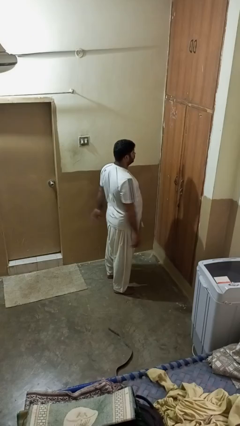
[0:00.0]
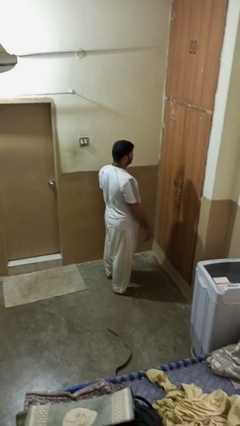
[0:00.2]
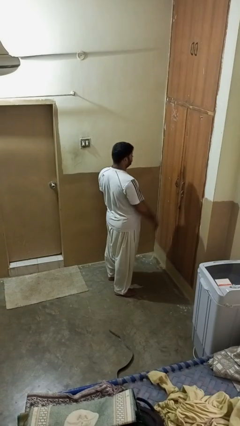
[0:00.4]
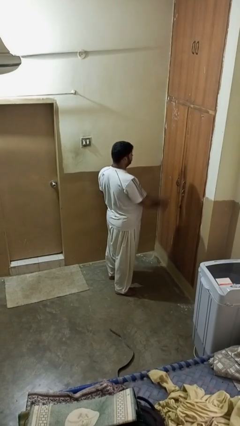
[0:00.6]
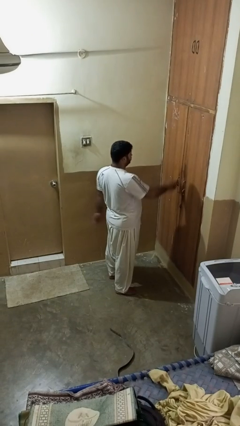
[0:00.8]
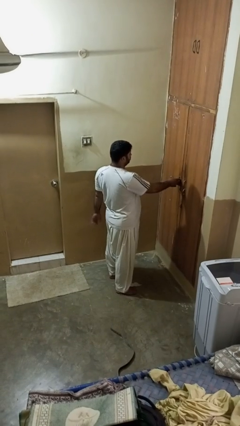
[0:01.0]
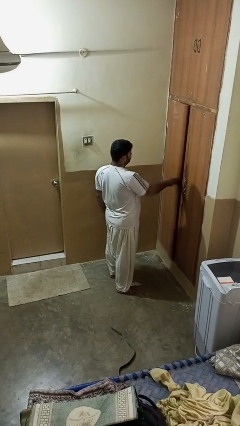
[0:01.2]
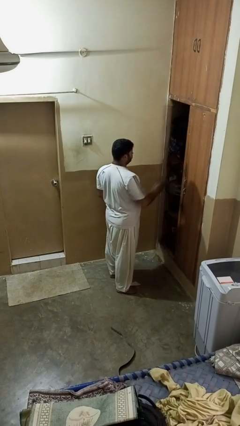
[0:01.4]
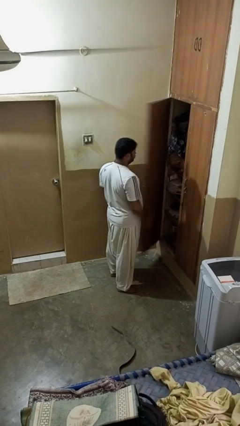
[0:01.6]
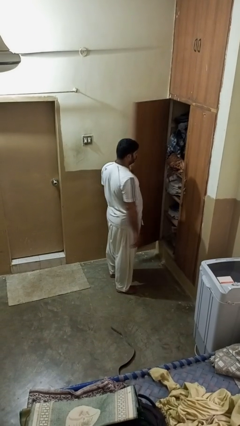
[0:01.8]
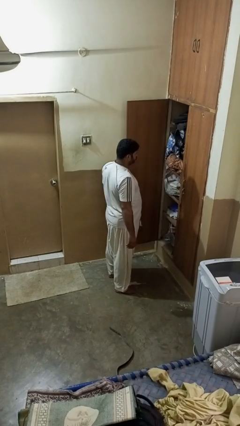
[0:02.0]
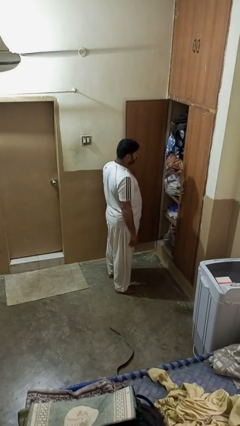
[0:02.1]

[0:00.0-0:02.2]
person opens closet door

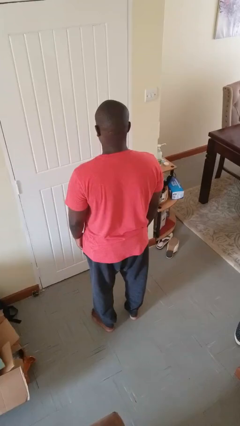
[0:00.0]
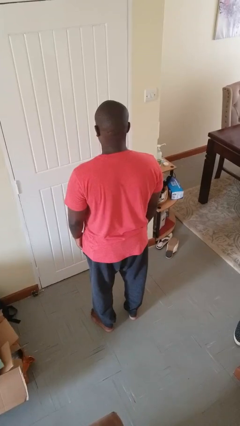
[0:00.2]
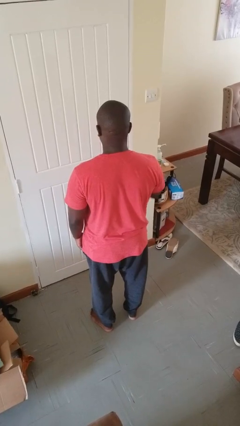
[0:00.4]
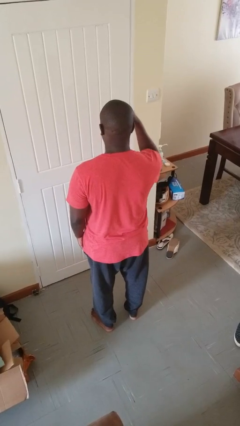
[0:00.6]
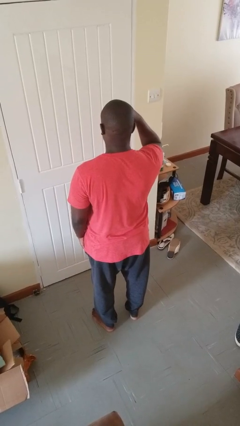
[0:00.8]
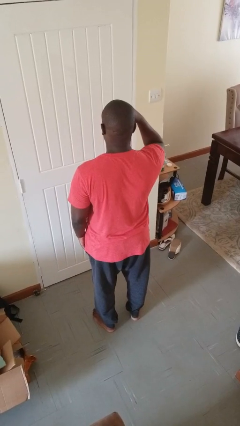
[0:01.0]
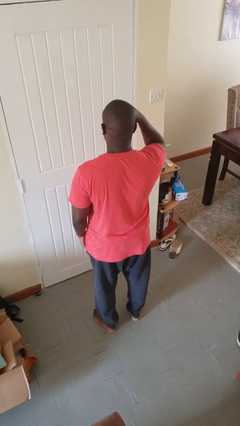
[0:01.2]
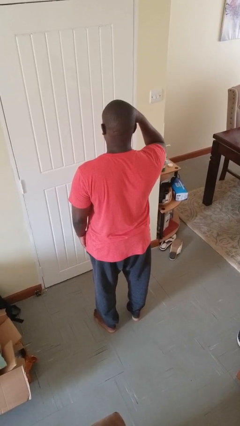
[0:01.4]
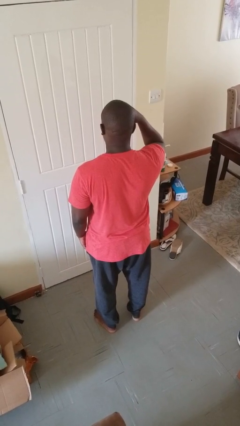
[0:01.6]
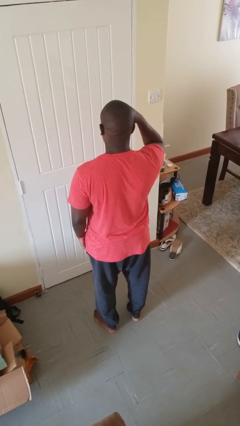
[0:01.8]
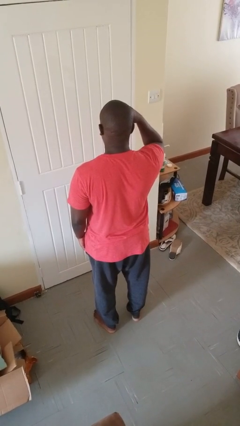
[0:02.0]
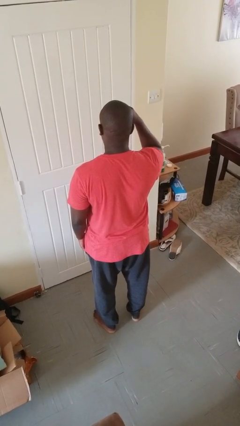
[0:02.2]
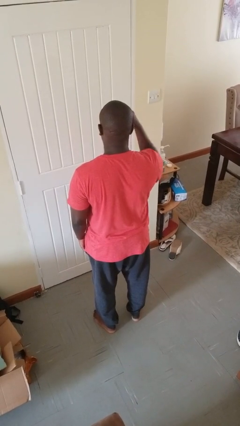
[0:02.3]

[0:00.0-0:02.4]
person salutes

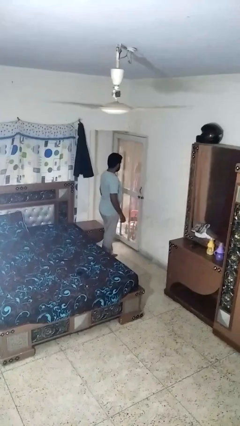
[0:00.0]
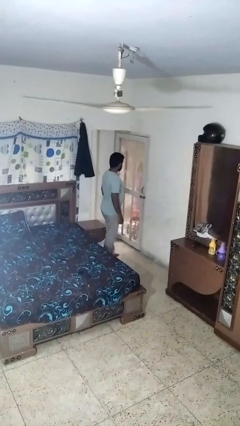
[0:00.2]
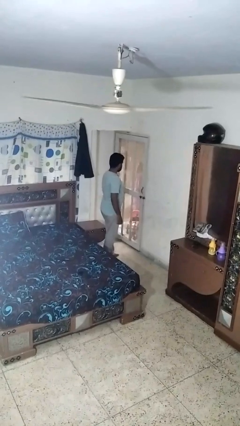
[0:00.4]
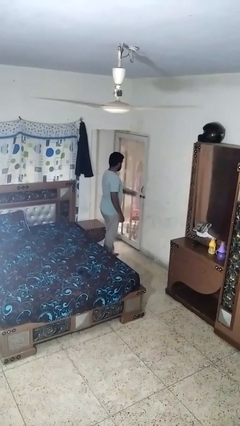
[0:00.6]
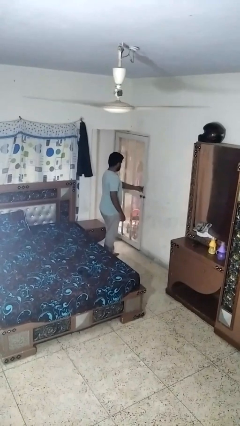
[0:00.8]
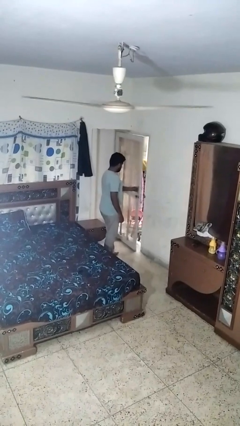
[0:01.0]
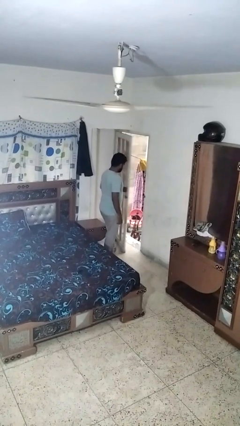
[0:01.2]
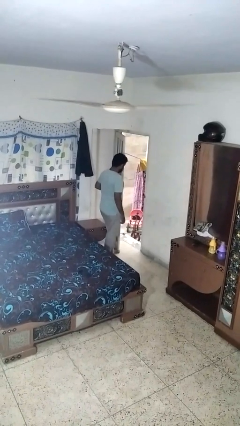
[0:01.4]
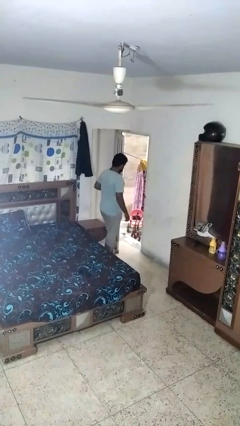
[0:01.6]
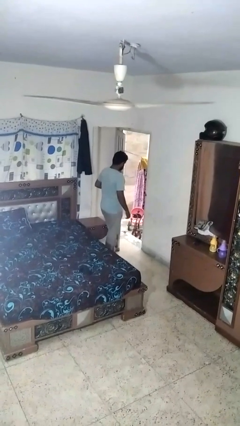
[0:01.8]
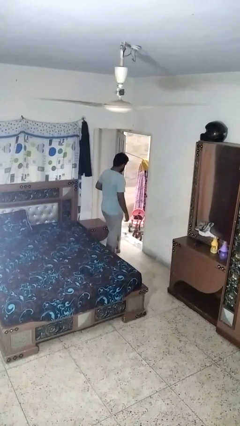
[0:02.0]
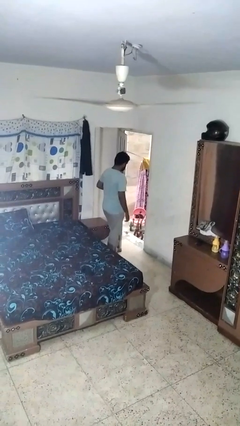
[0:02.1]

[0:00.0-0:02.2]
person opens facility door

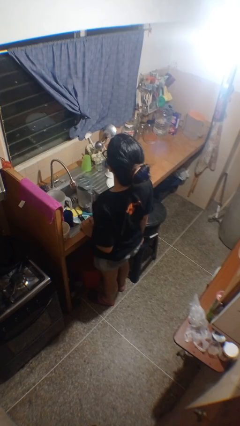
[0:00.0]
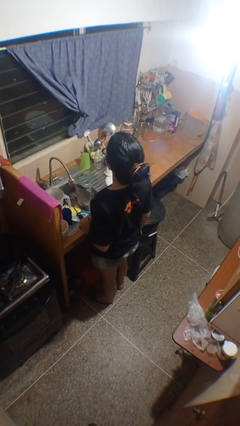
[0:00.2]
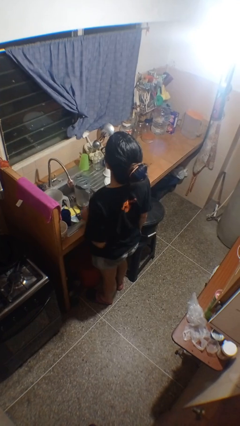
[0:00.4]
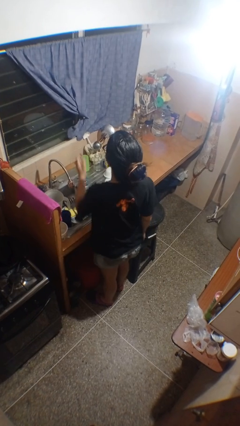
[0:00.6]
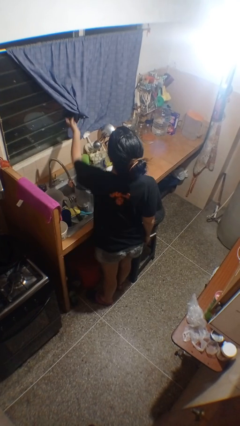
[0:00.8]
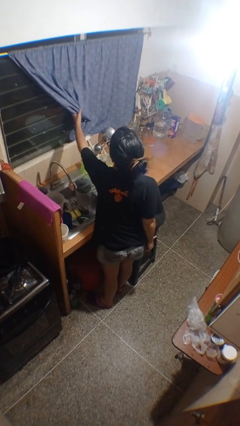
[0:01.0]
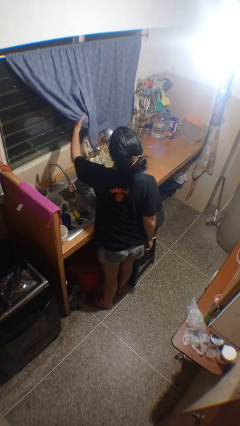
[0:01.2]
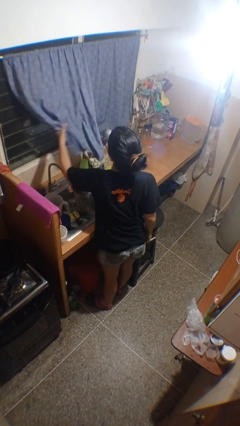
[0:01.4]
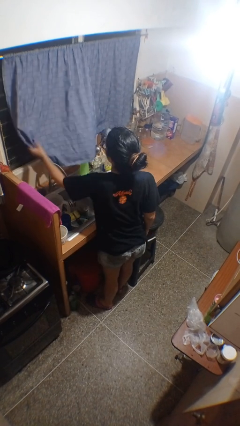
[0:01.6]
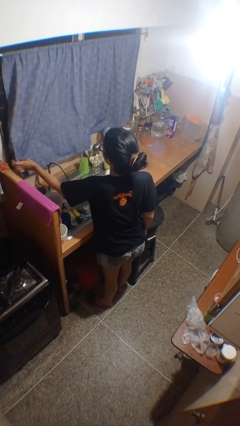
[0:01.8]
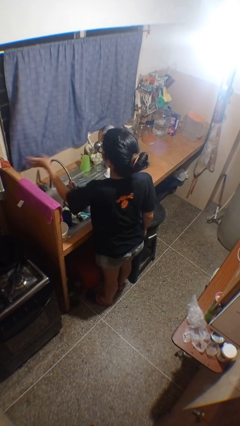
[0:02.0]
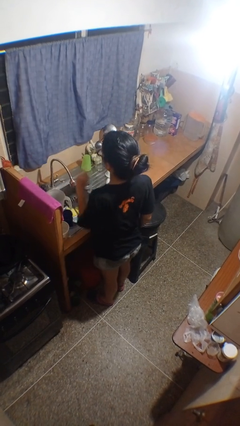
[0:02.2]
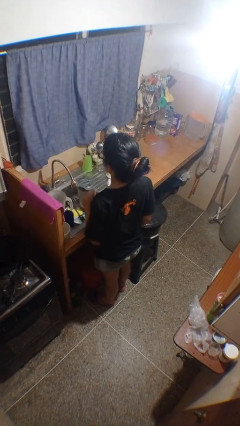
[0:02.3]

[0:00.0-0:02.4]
person closes curtains

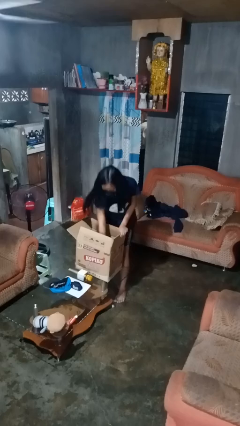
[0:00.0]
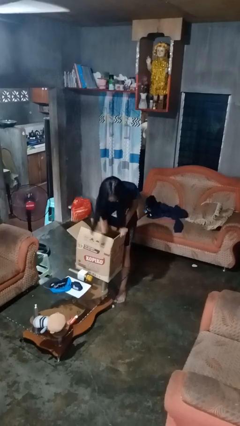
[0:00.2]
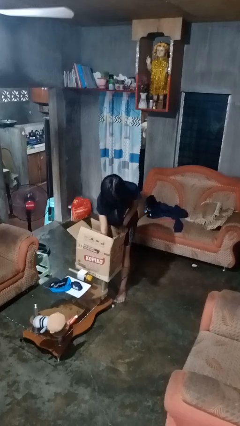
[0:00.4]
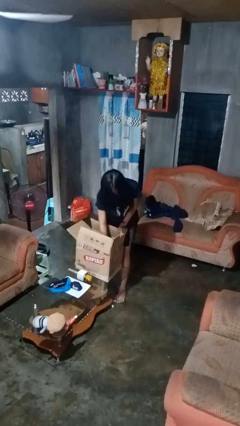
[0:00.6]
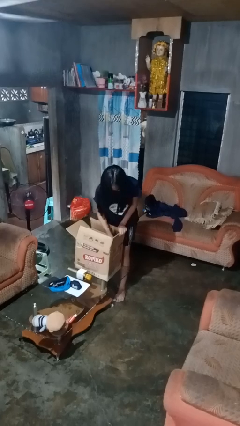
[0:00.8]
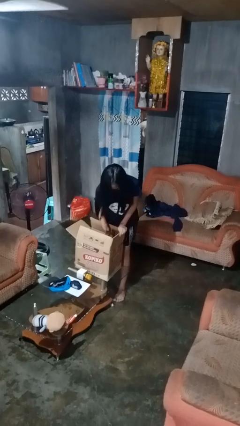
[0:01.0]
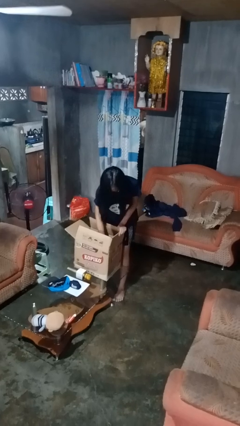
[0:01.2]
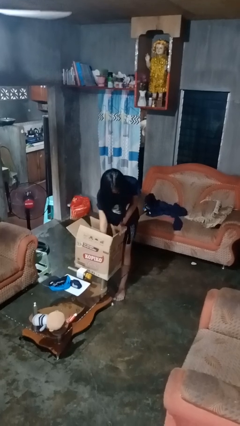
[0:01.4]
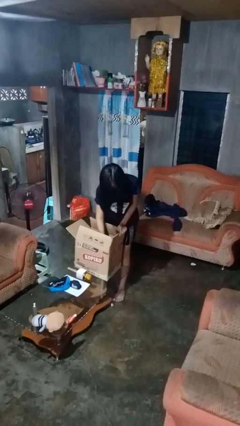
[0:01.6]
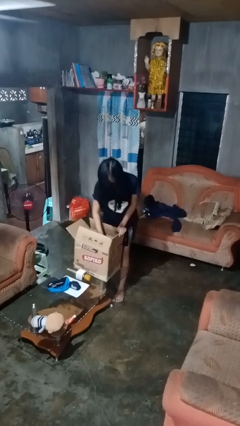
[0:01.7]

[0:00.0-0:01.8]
person searches in box

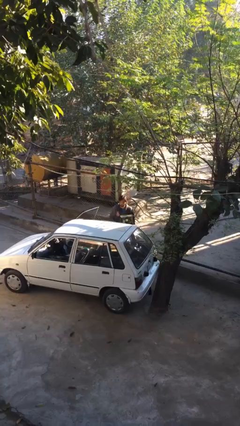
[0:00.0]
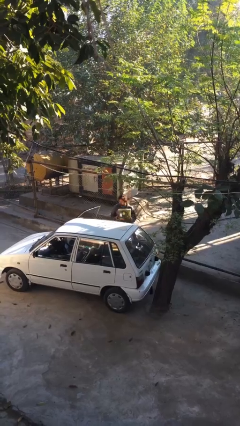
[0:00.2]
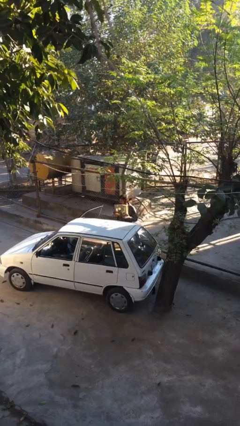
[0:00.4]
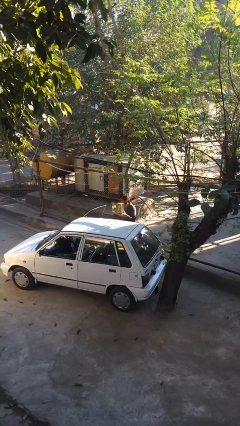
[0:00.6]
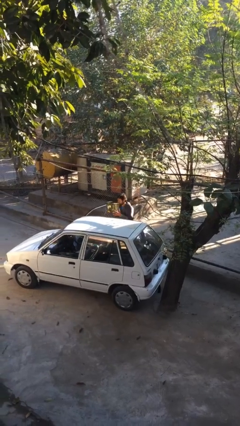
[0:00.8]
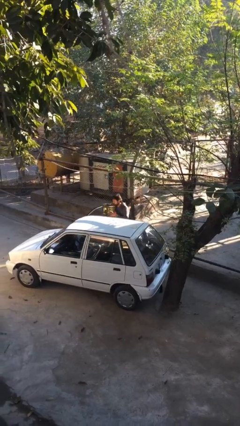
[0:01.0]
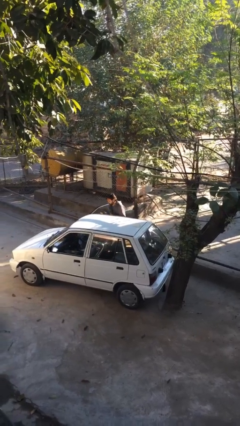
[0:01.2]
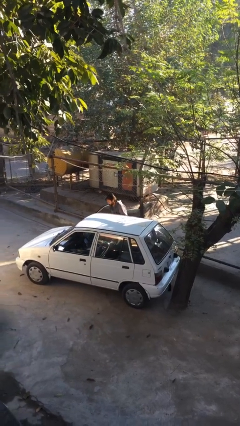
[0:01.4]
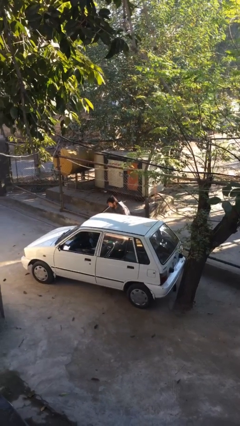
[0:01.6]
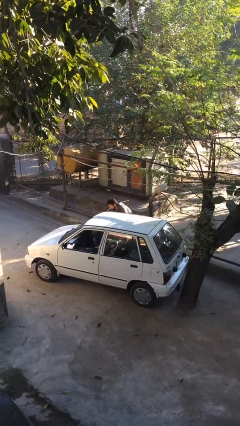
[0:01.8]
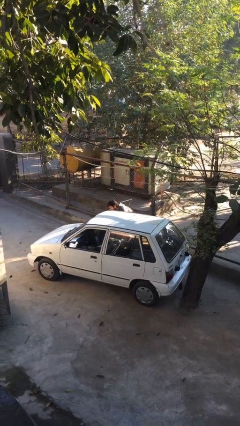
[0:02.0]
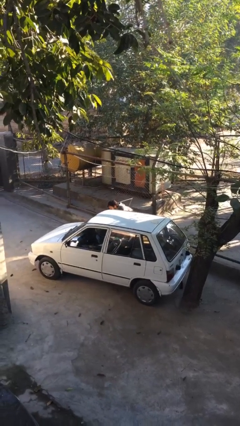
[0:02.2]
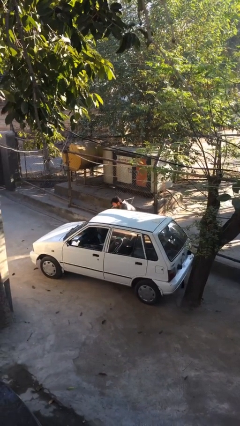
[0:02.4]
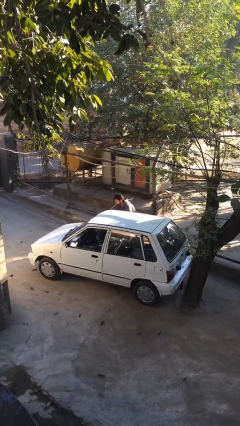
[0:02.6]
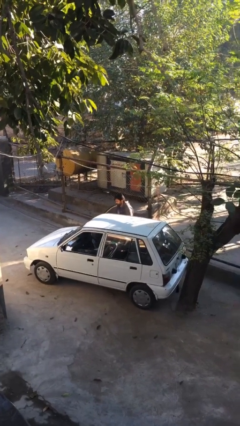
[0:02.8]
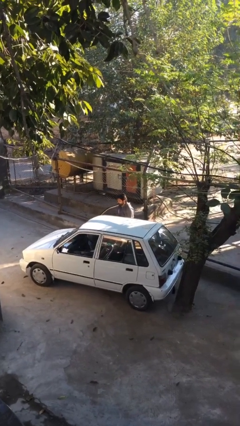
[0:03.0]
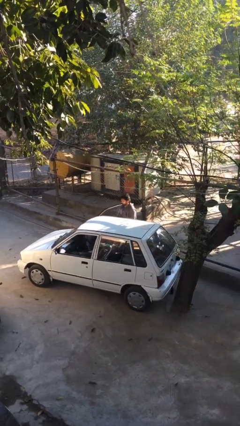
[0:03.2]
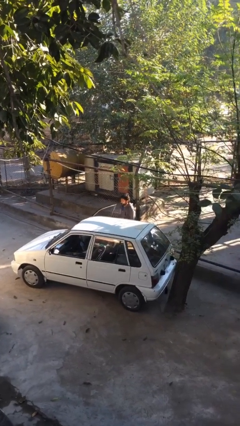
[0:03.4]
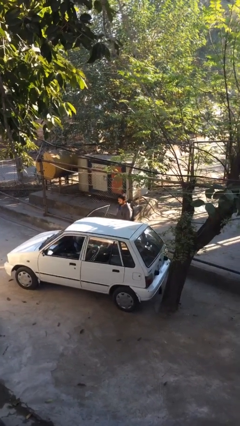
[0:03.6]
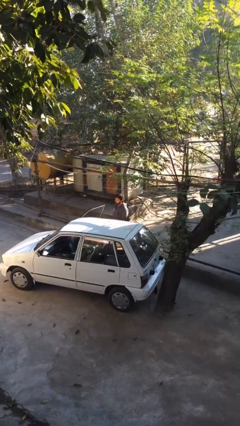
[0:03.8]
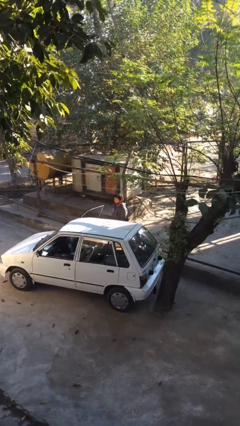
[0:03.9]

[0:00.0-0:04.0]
person loads car

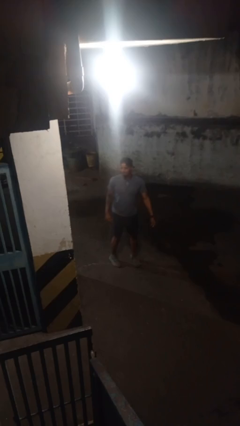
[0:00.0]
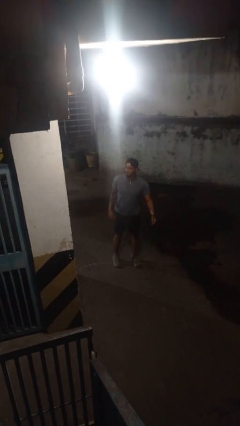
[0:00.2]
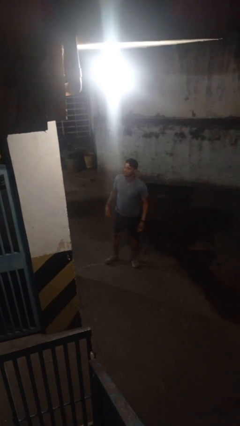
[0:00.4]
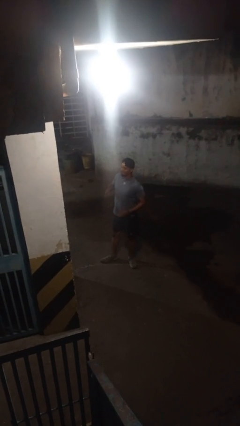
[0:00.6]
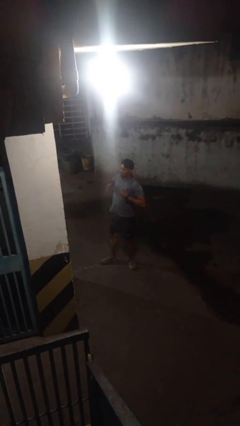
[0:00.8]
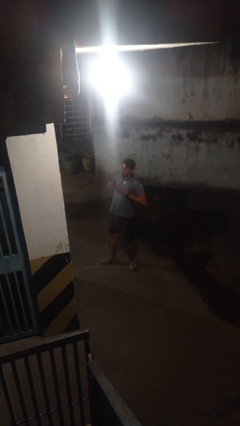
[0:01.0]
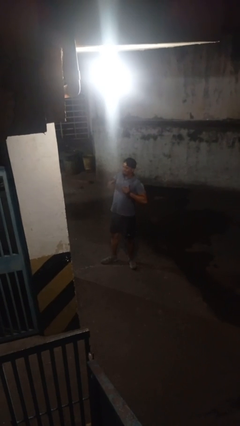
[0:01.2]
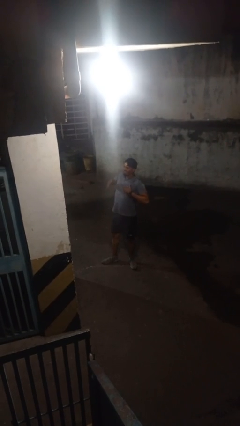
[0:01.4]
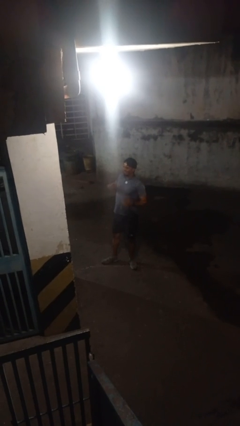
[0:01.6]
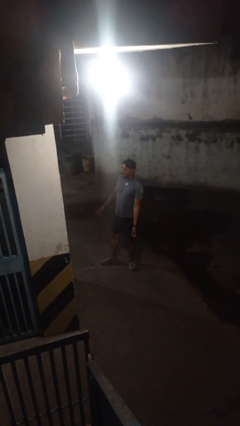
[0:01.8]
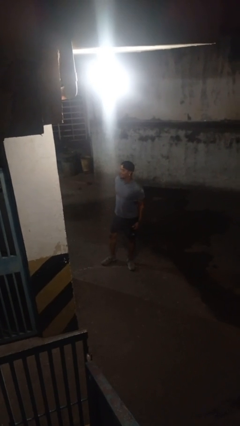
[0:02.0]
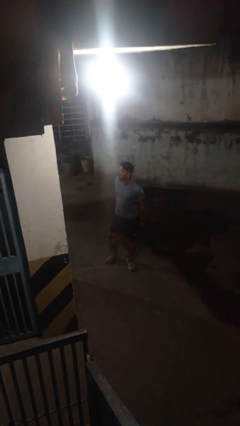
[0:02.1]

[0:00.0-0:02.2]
person drums on chest
